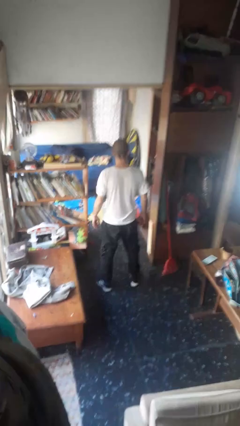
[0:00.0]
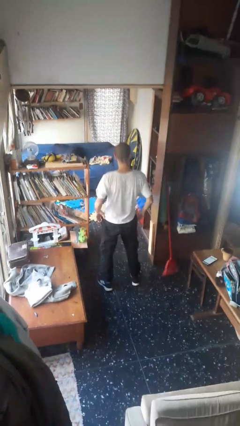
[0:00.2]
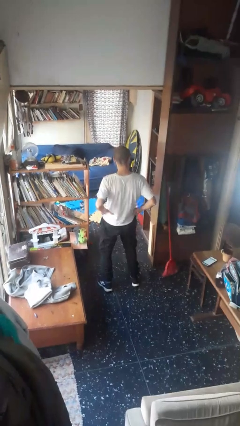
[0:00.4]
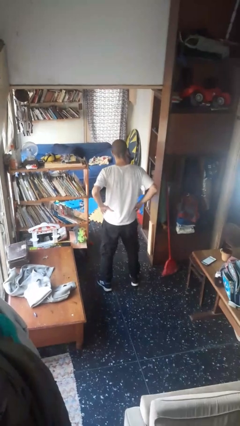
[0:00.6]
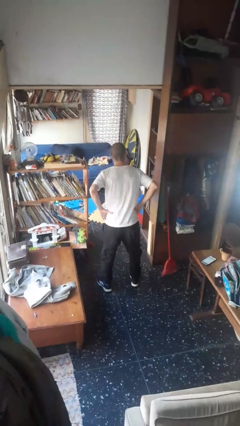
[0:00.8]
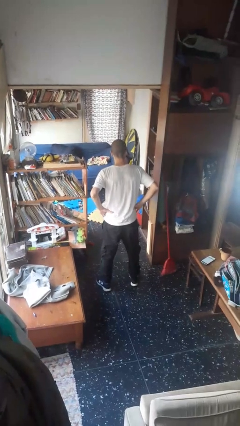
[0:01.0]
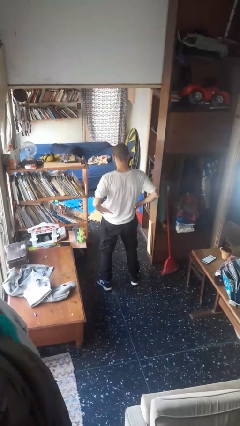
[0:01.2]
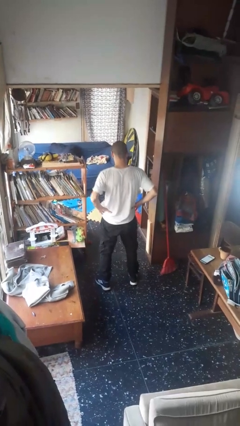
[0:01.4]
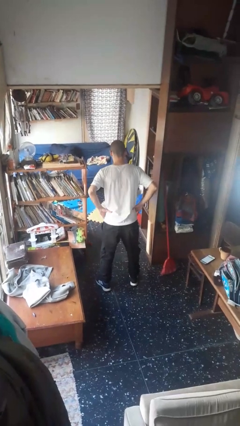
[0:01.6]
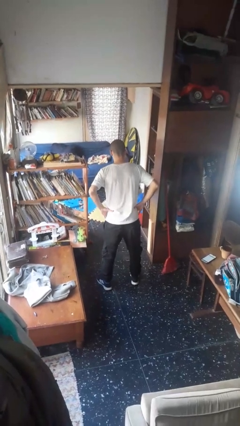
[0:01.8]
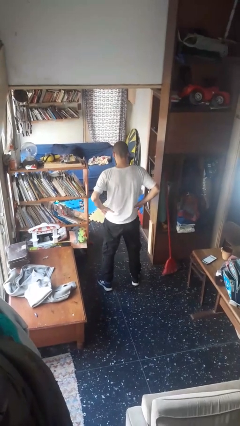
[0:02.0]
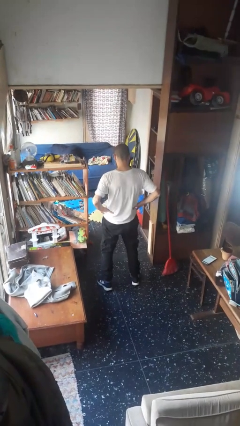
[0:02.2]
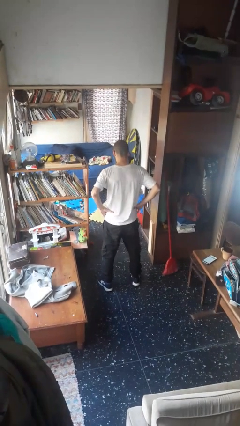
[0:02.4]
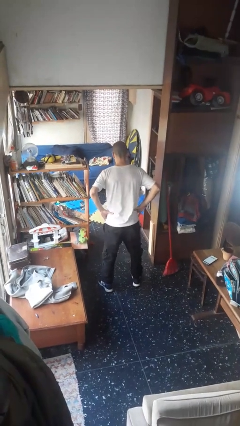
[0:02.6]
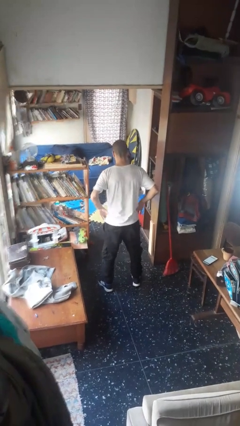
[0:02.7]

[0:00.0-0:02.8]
person wiggles hips

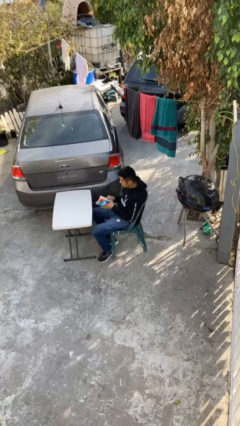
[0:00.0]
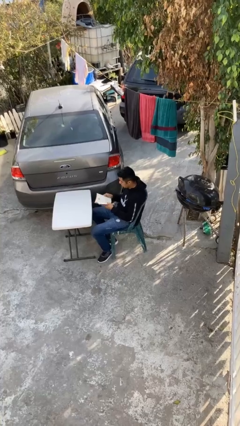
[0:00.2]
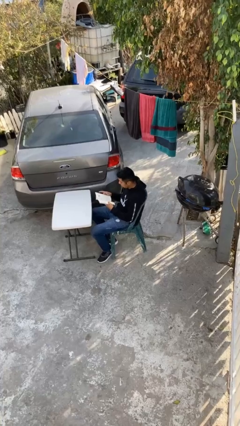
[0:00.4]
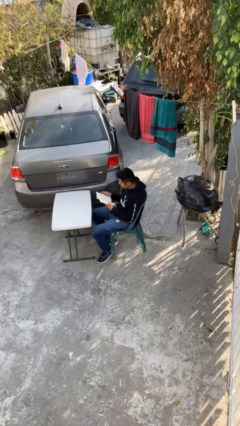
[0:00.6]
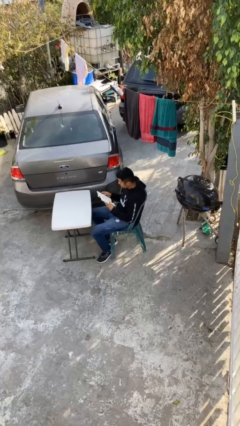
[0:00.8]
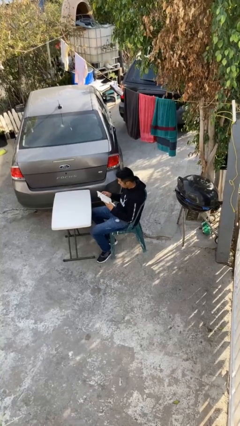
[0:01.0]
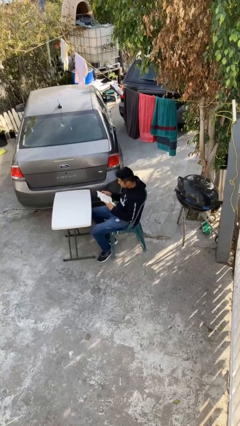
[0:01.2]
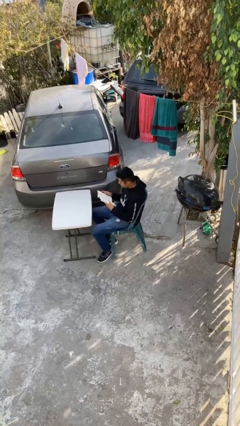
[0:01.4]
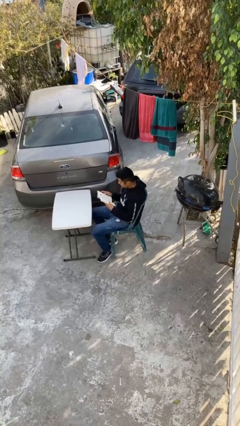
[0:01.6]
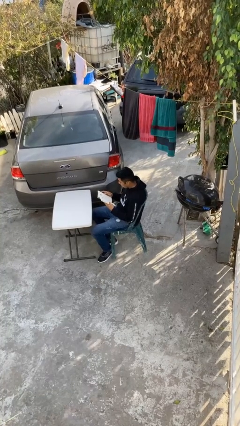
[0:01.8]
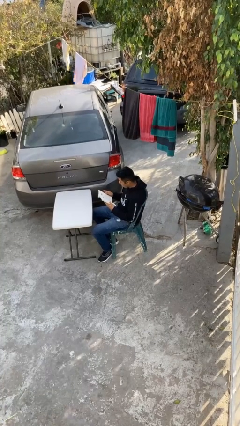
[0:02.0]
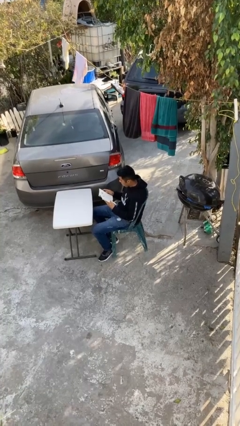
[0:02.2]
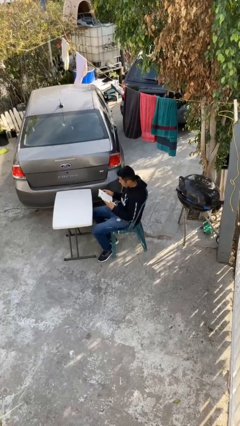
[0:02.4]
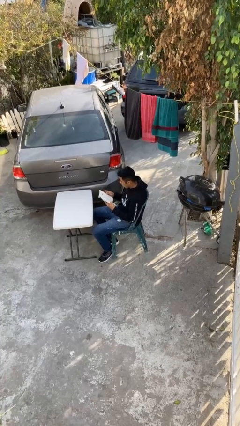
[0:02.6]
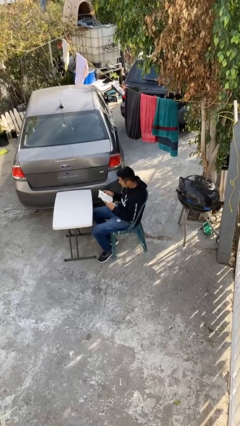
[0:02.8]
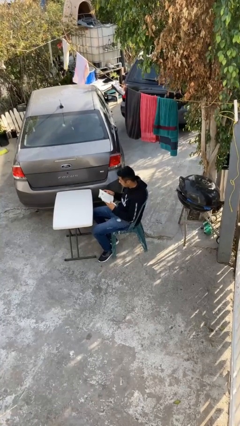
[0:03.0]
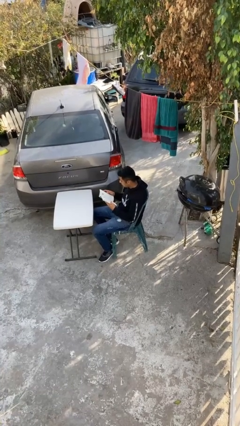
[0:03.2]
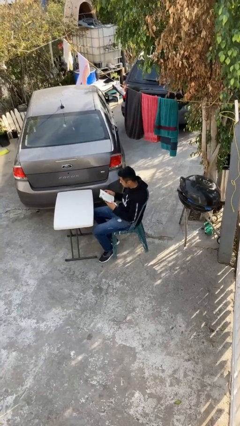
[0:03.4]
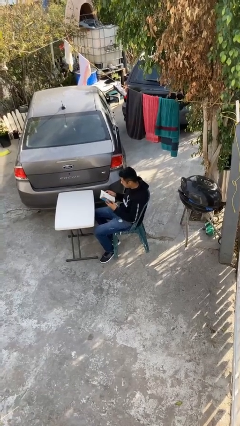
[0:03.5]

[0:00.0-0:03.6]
person reads document

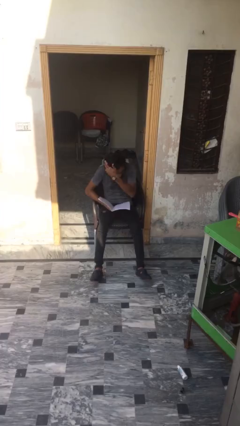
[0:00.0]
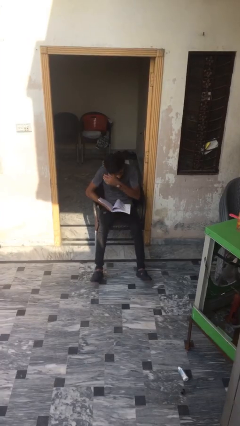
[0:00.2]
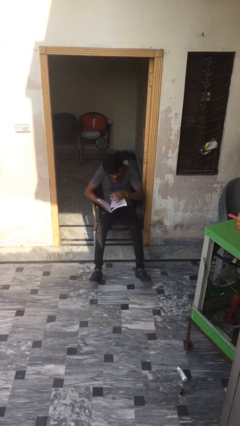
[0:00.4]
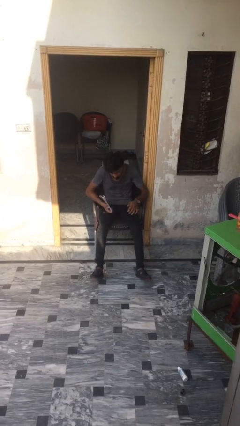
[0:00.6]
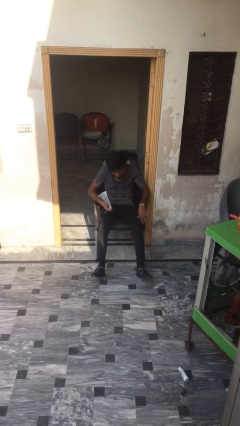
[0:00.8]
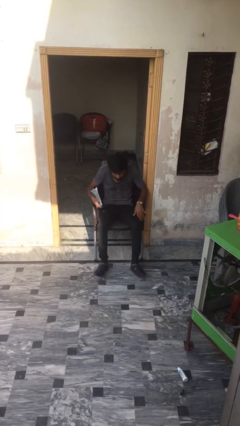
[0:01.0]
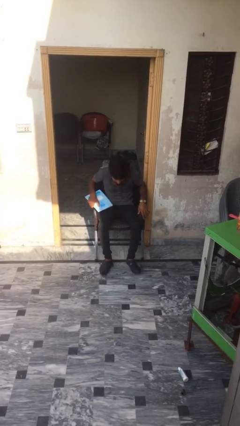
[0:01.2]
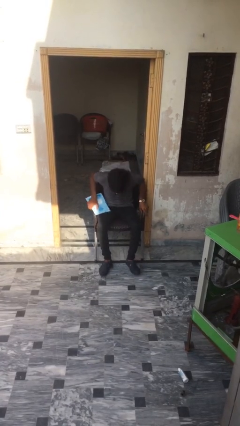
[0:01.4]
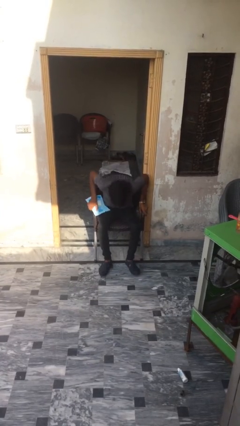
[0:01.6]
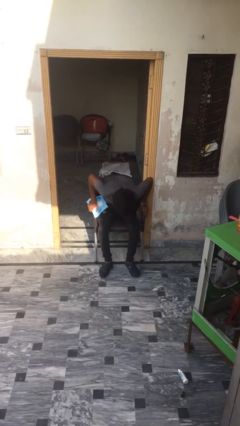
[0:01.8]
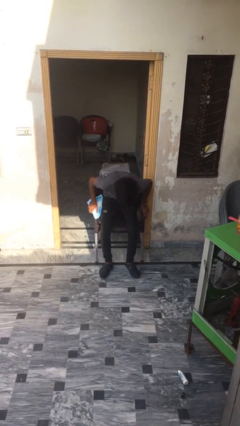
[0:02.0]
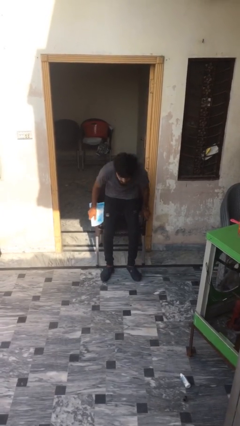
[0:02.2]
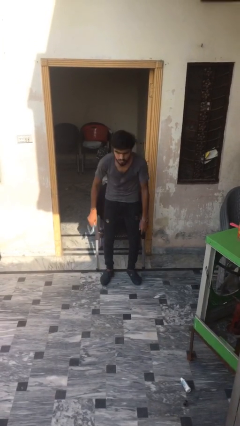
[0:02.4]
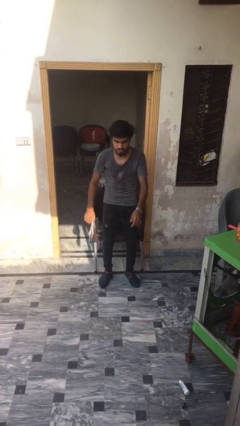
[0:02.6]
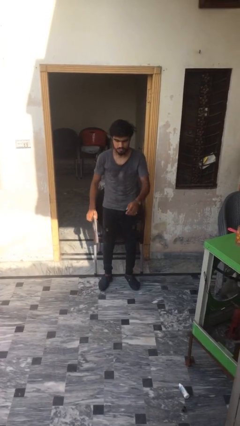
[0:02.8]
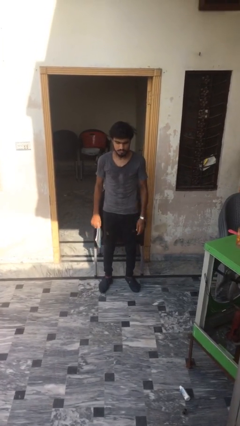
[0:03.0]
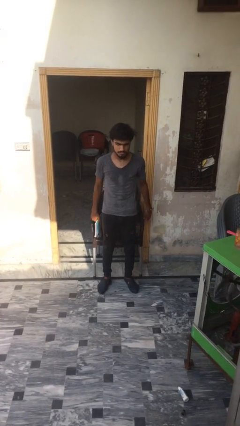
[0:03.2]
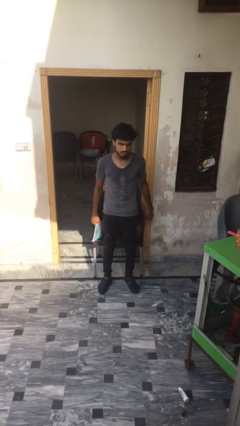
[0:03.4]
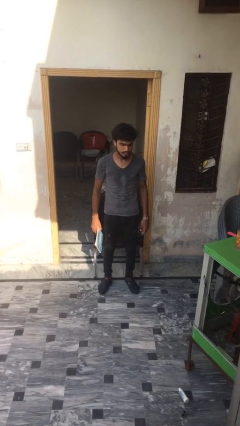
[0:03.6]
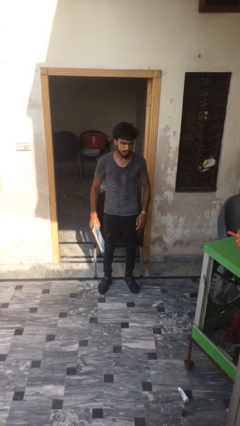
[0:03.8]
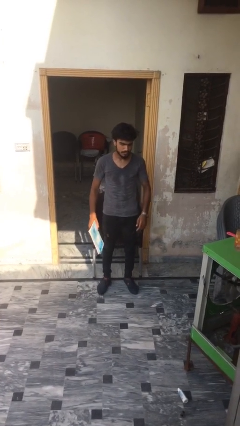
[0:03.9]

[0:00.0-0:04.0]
person stands up

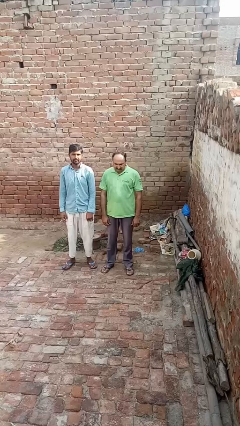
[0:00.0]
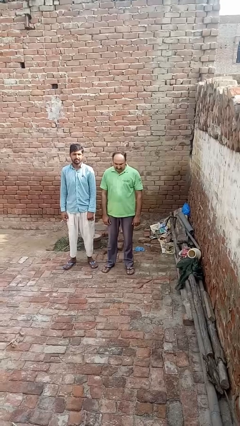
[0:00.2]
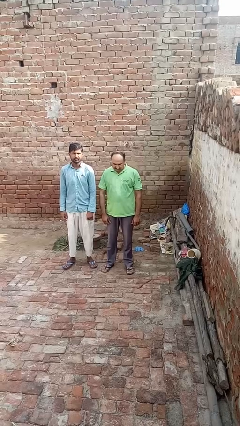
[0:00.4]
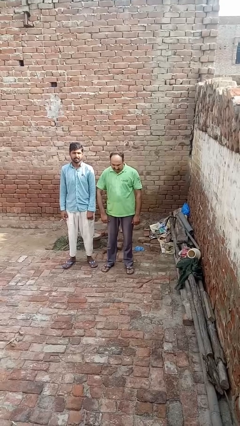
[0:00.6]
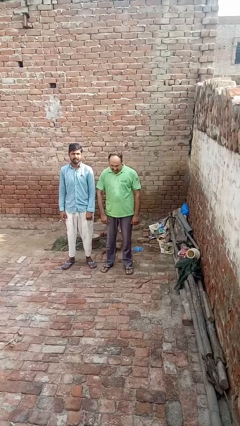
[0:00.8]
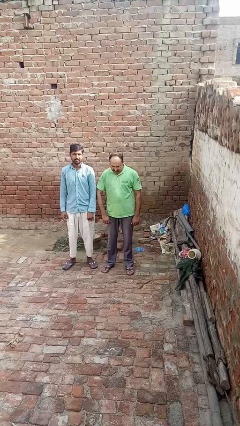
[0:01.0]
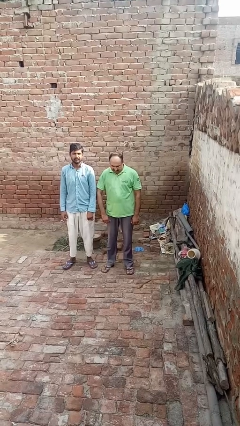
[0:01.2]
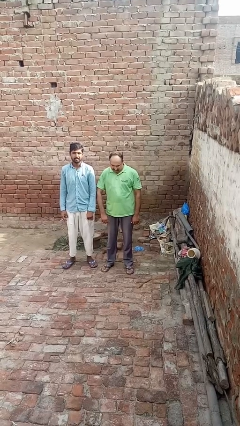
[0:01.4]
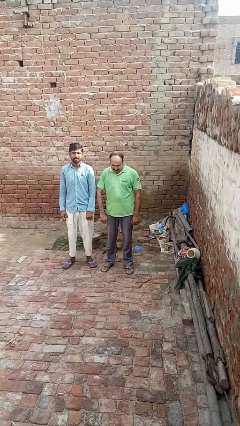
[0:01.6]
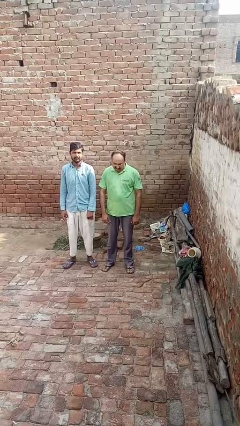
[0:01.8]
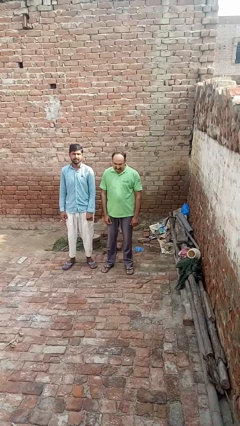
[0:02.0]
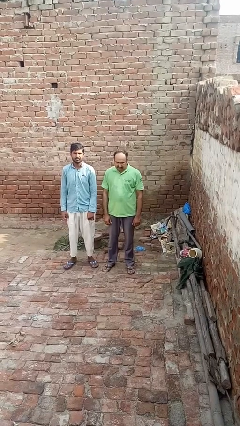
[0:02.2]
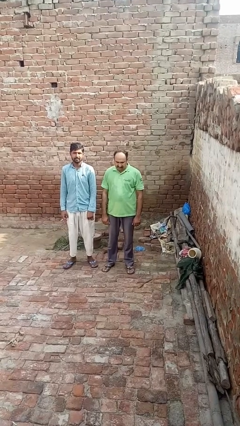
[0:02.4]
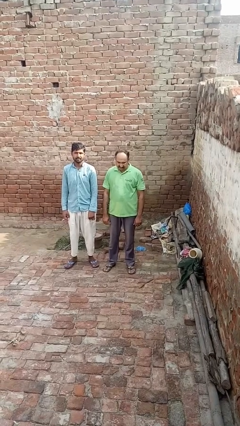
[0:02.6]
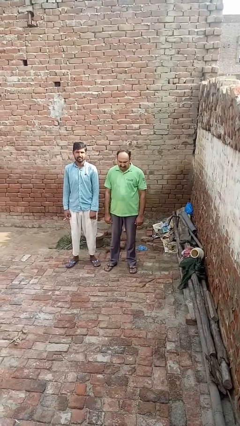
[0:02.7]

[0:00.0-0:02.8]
person nudges person with elbow

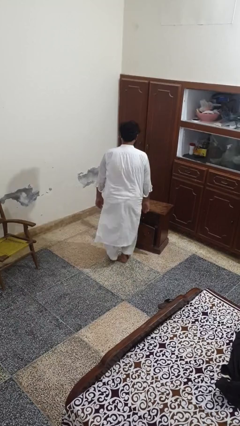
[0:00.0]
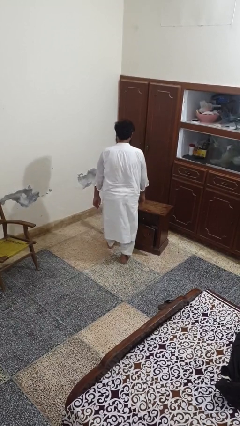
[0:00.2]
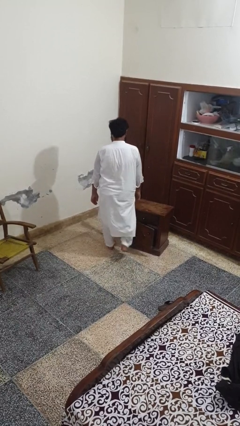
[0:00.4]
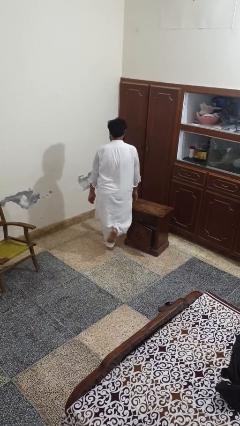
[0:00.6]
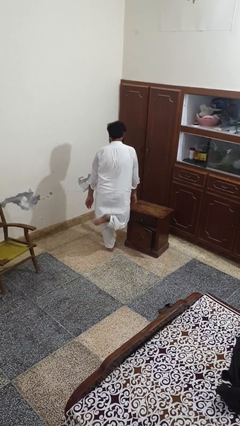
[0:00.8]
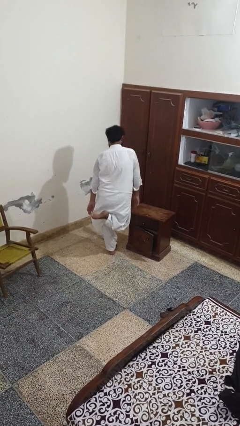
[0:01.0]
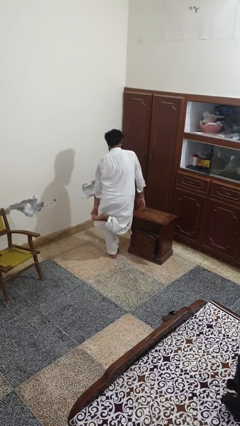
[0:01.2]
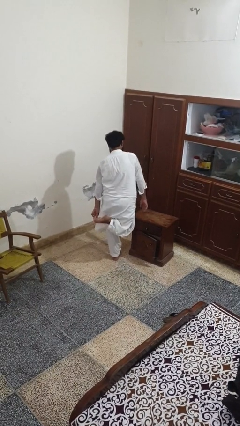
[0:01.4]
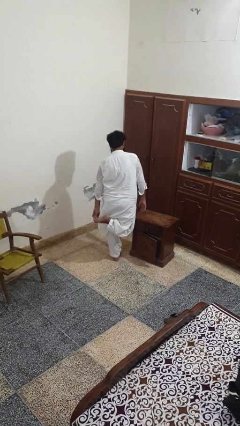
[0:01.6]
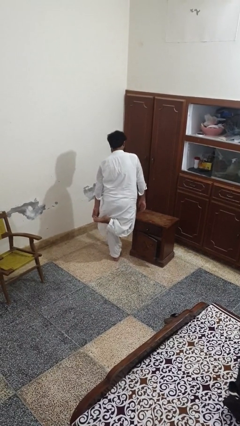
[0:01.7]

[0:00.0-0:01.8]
person stubs toe

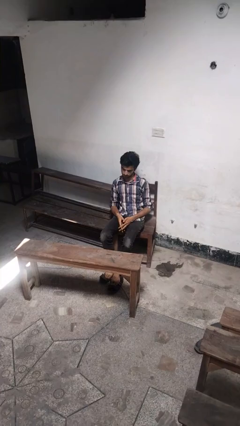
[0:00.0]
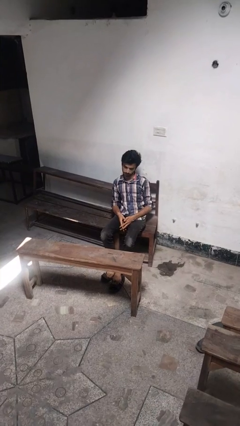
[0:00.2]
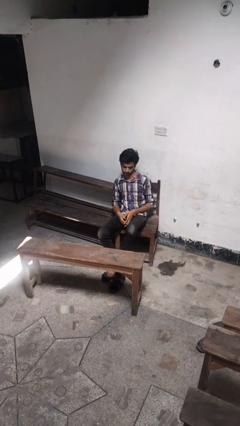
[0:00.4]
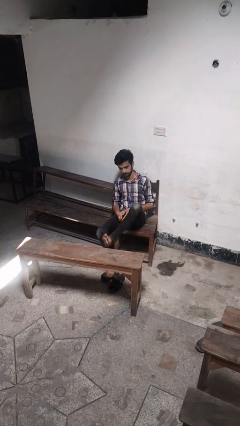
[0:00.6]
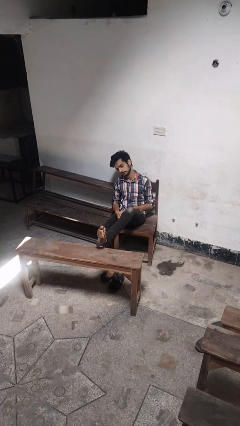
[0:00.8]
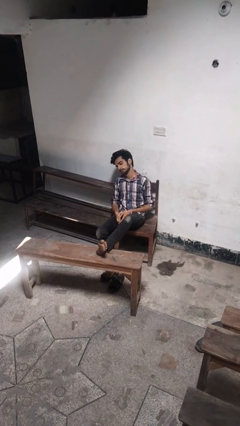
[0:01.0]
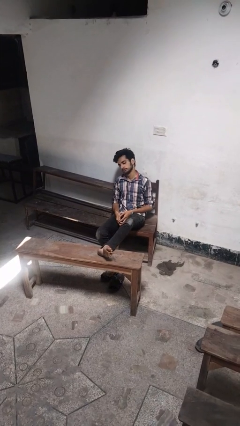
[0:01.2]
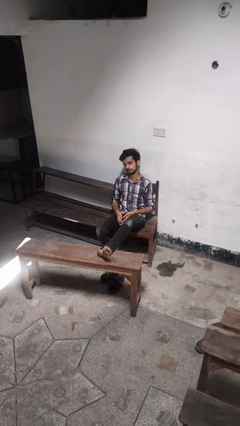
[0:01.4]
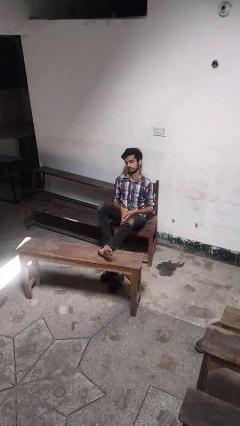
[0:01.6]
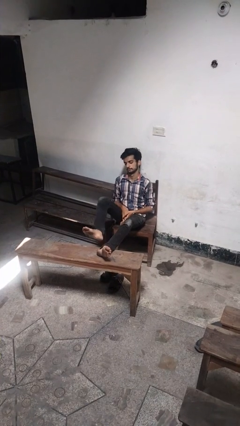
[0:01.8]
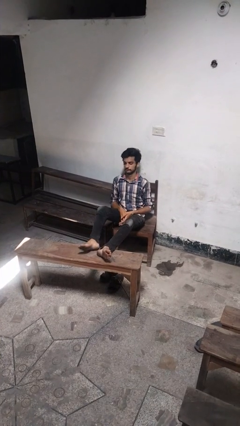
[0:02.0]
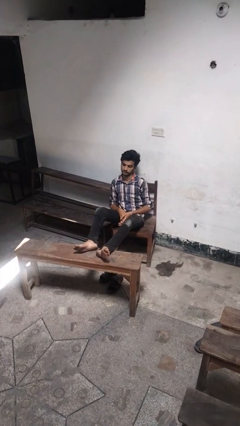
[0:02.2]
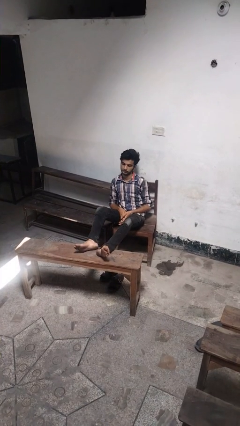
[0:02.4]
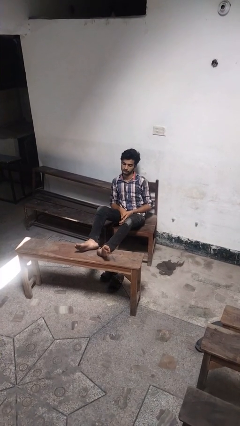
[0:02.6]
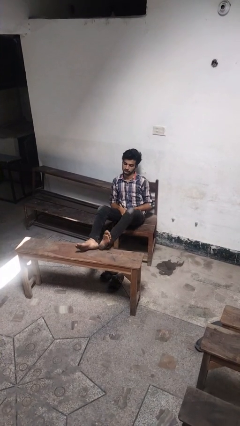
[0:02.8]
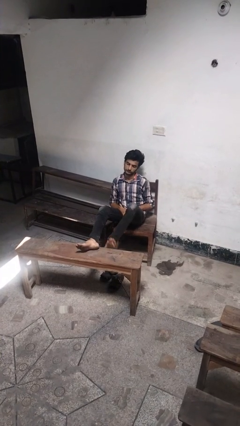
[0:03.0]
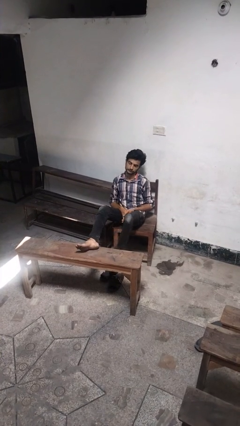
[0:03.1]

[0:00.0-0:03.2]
person puts feet up
